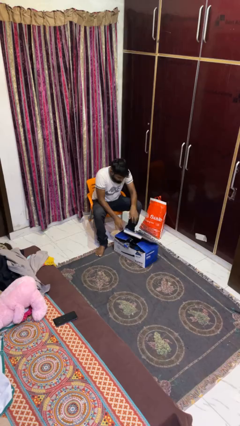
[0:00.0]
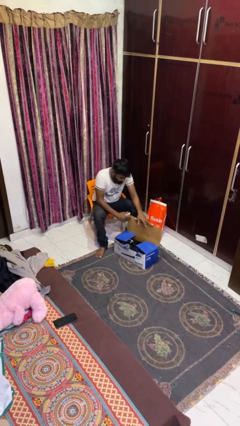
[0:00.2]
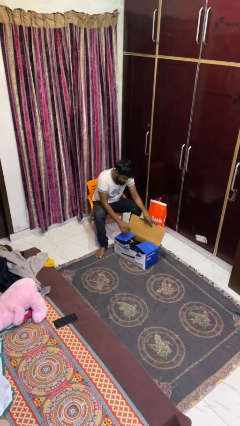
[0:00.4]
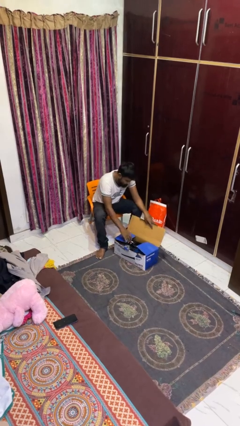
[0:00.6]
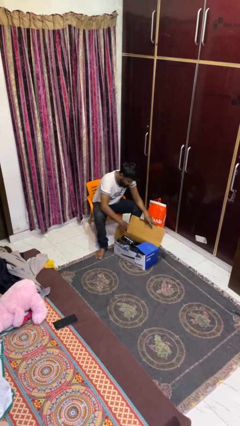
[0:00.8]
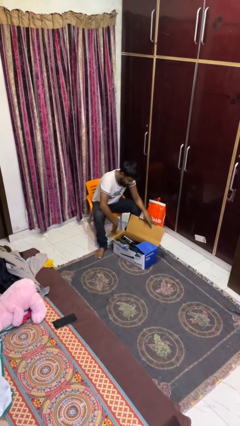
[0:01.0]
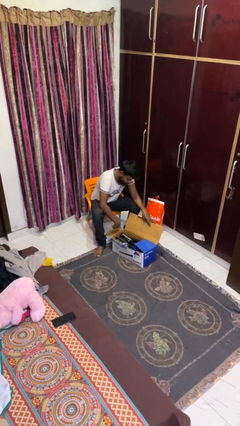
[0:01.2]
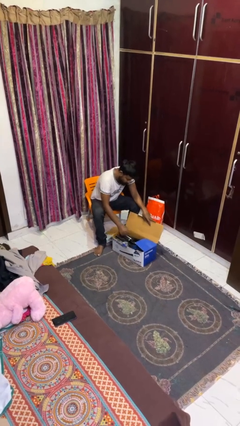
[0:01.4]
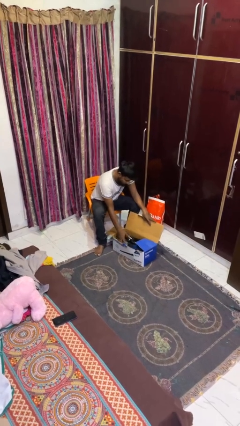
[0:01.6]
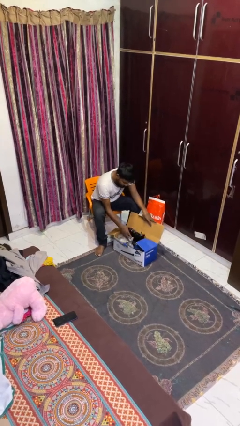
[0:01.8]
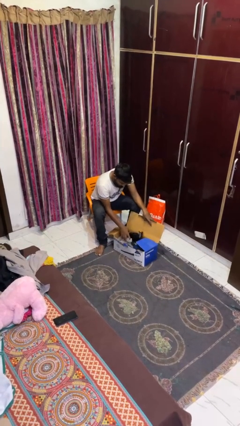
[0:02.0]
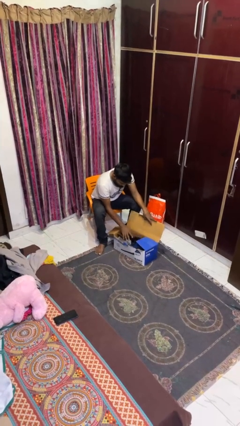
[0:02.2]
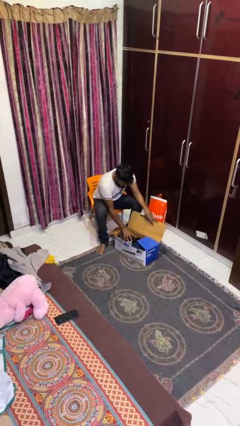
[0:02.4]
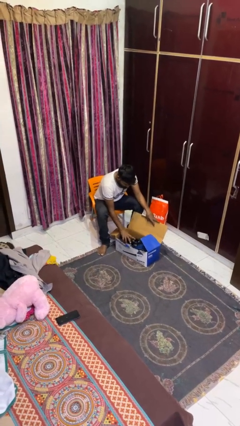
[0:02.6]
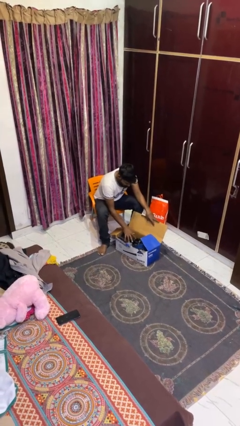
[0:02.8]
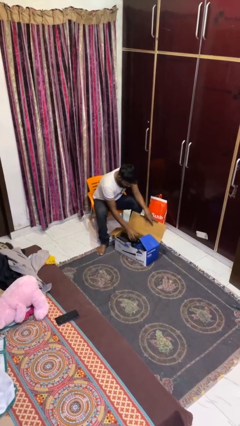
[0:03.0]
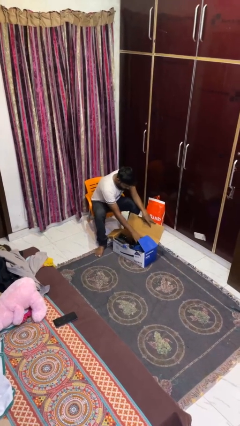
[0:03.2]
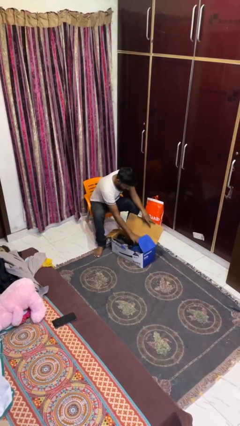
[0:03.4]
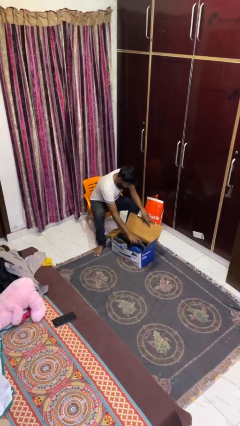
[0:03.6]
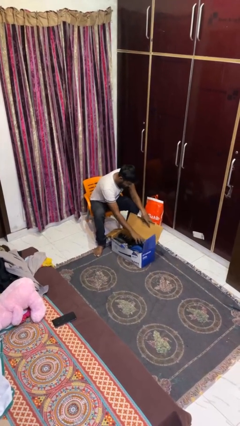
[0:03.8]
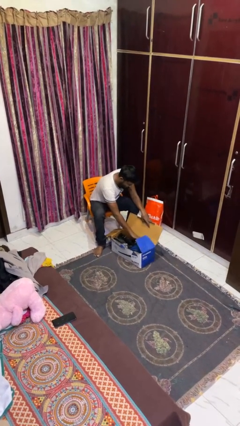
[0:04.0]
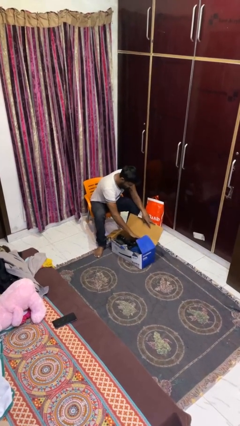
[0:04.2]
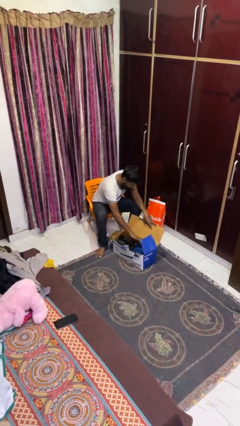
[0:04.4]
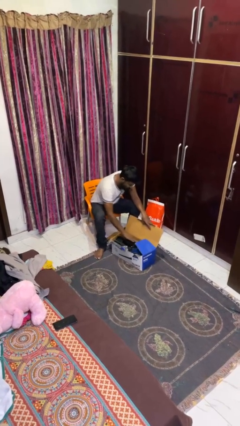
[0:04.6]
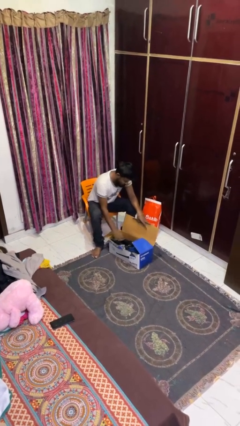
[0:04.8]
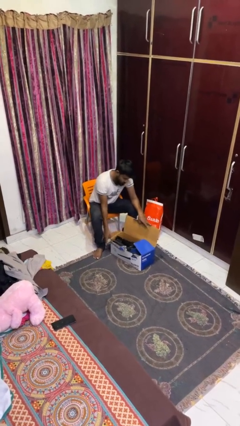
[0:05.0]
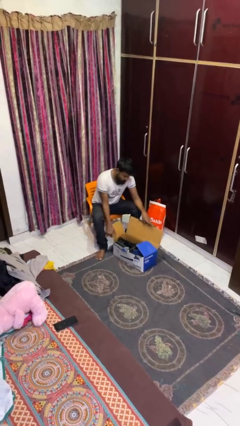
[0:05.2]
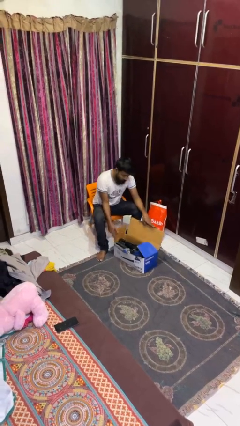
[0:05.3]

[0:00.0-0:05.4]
person searches in box

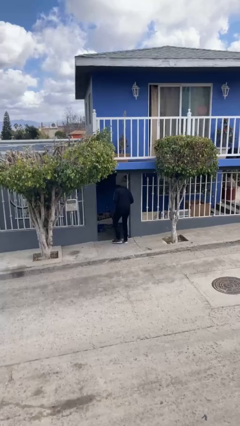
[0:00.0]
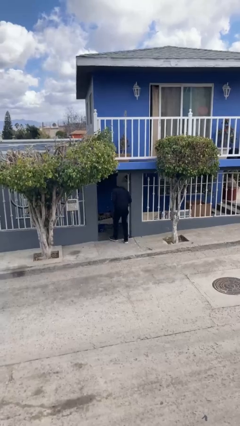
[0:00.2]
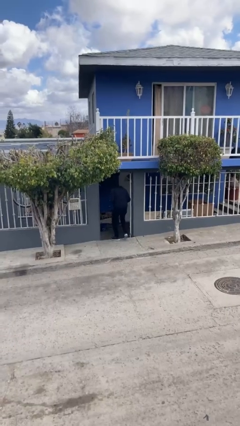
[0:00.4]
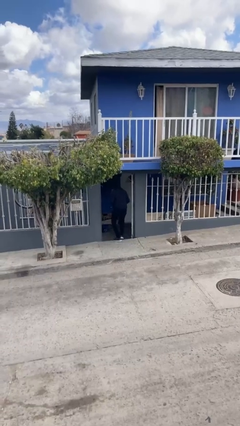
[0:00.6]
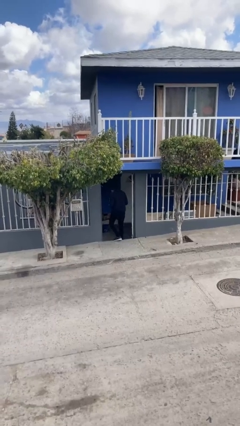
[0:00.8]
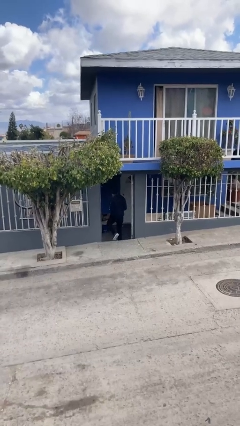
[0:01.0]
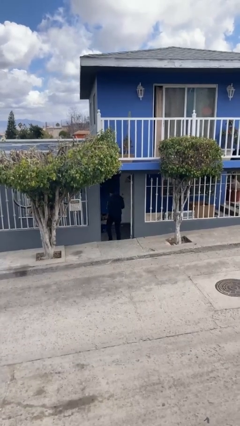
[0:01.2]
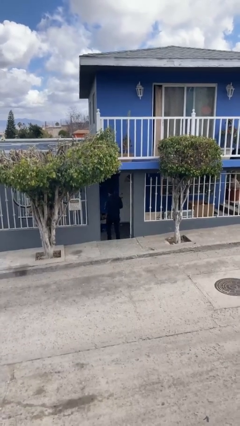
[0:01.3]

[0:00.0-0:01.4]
person exits scene through structure

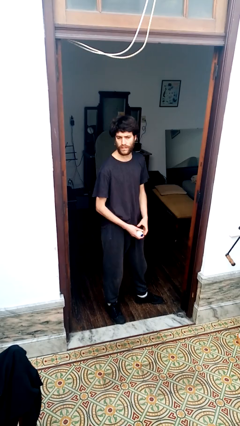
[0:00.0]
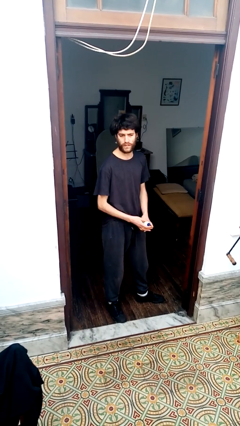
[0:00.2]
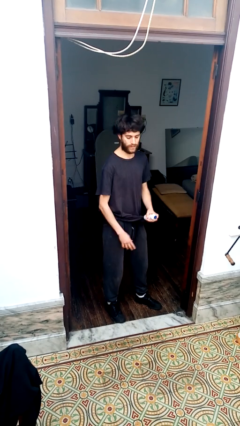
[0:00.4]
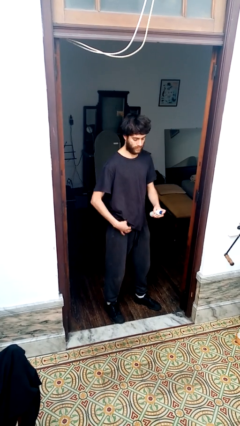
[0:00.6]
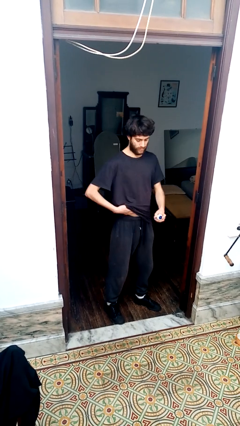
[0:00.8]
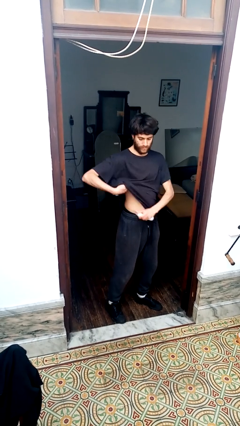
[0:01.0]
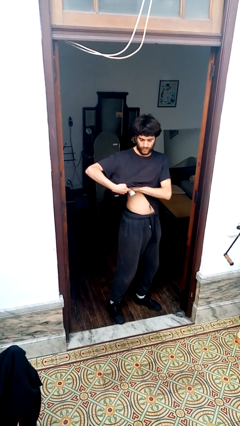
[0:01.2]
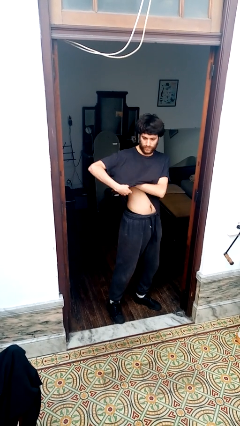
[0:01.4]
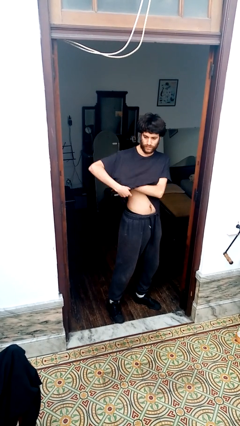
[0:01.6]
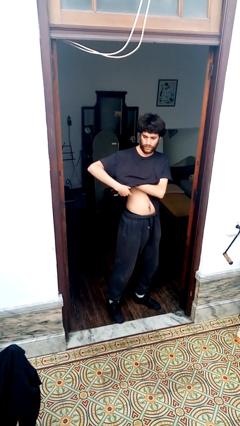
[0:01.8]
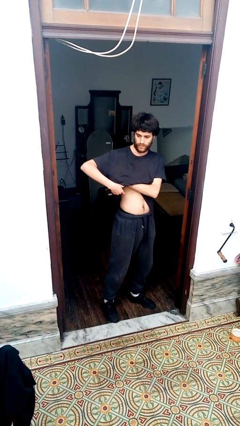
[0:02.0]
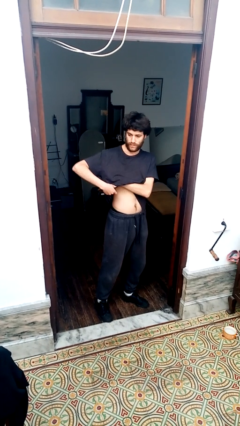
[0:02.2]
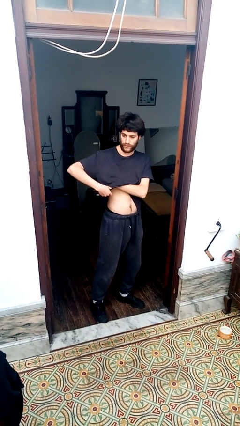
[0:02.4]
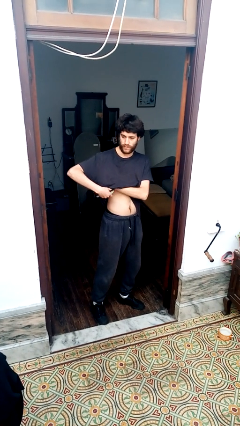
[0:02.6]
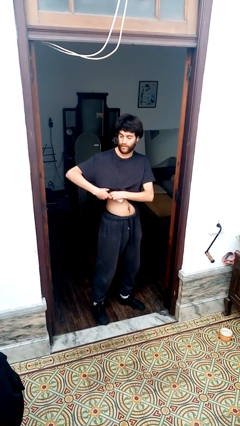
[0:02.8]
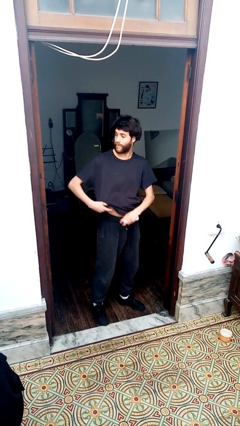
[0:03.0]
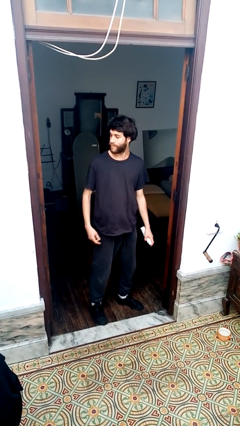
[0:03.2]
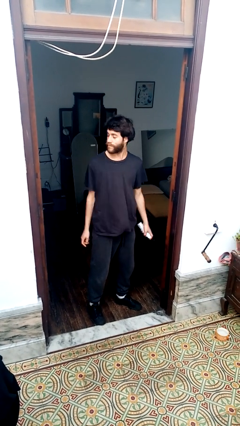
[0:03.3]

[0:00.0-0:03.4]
person applies deodorant

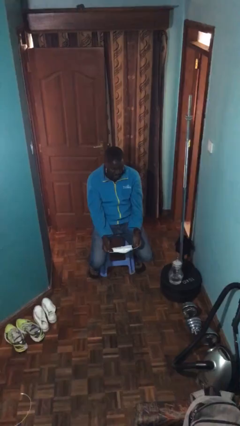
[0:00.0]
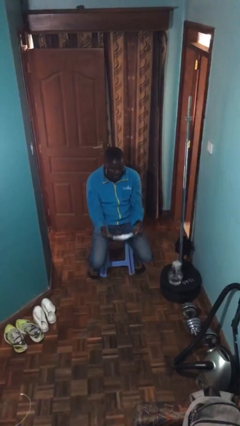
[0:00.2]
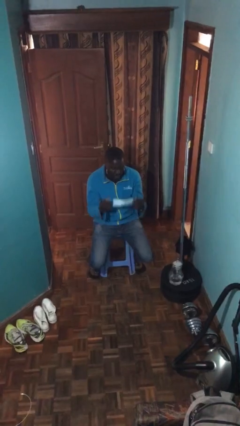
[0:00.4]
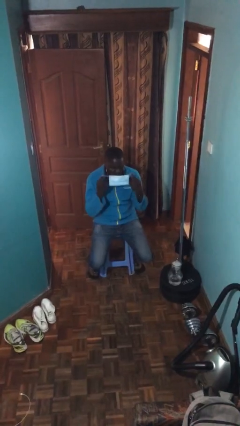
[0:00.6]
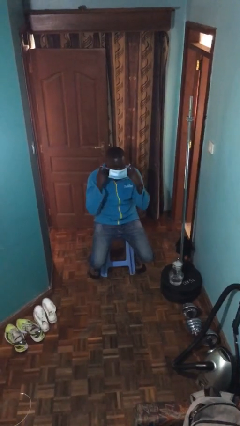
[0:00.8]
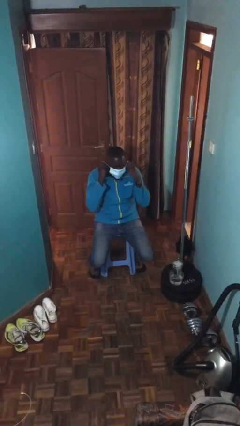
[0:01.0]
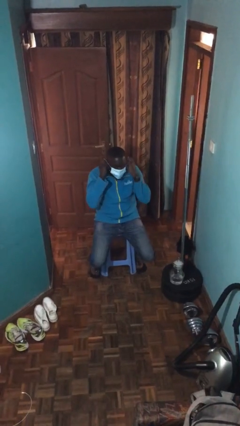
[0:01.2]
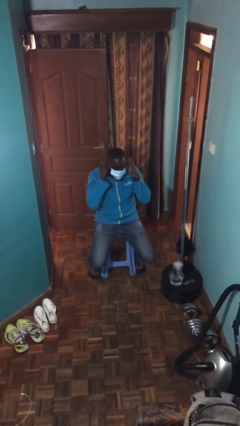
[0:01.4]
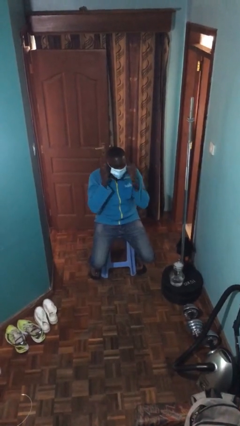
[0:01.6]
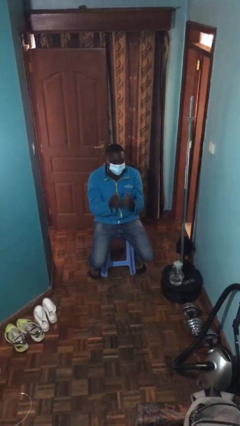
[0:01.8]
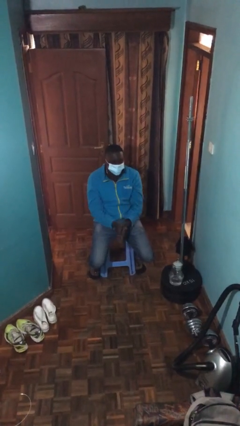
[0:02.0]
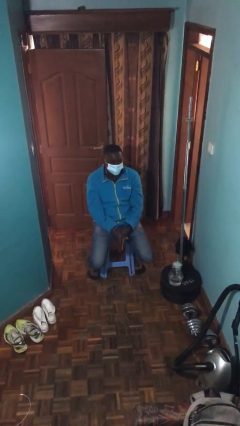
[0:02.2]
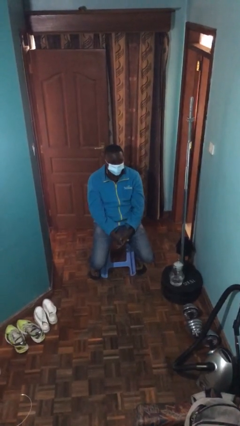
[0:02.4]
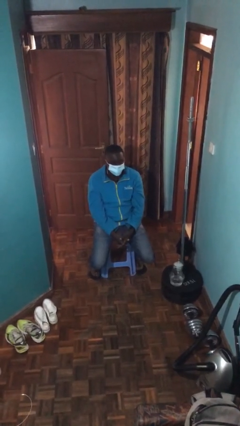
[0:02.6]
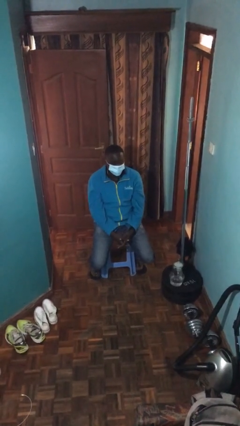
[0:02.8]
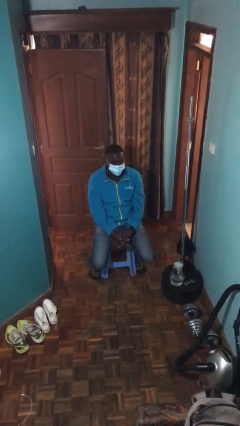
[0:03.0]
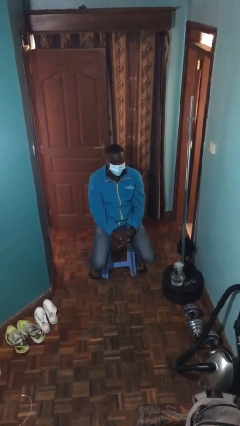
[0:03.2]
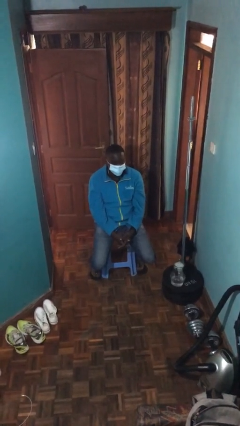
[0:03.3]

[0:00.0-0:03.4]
person puts on facemask

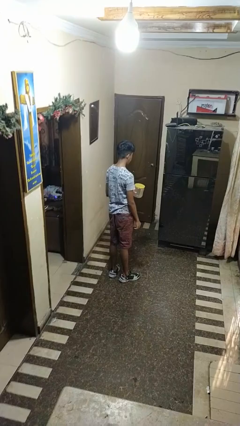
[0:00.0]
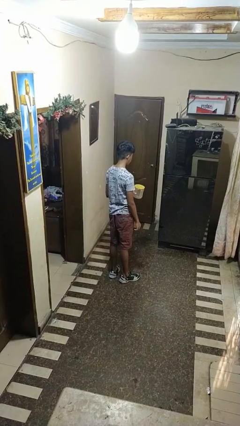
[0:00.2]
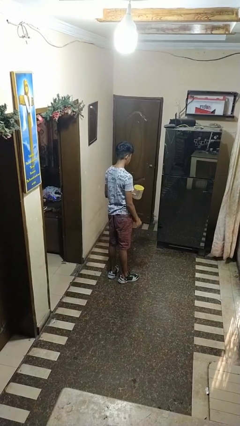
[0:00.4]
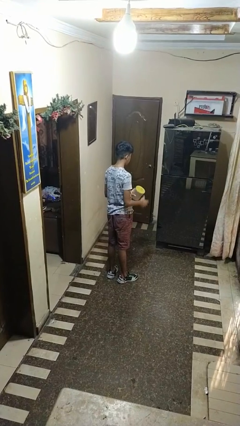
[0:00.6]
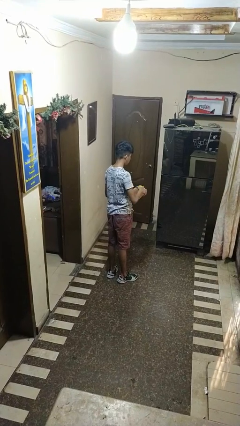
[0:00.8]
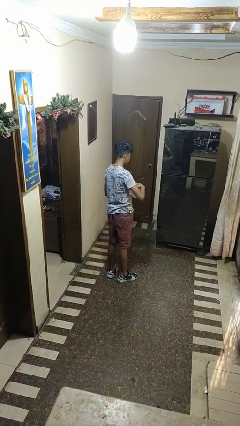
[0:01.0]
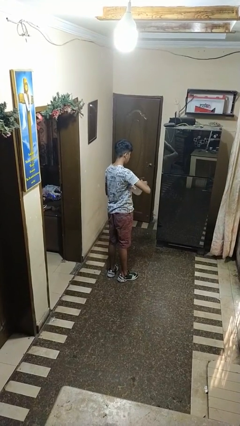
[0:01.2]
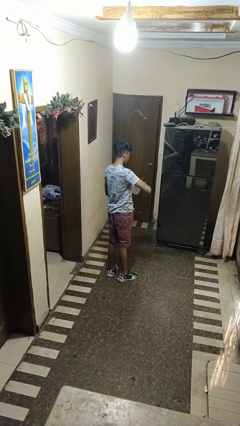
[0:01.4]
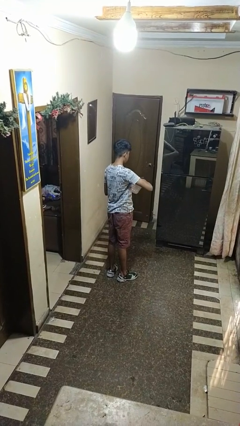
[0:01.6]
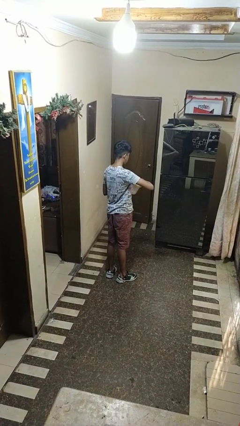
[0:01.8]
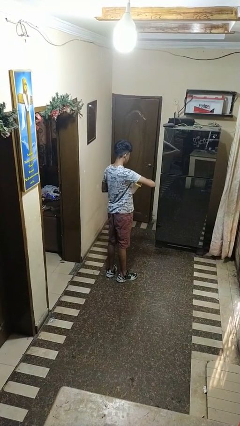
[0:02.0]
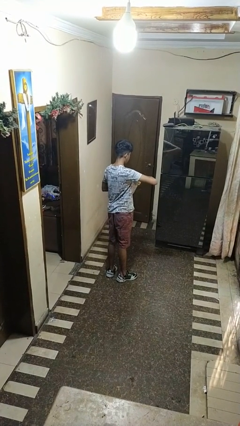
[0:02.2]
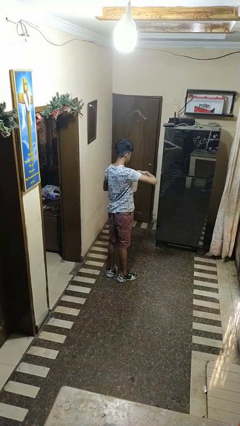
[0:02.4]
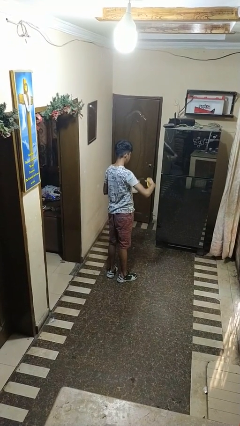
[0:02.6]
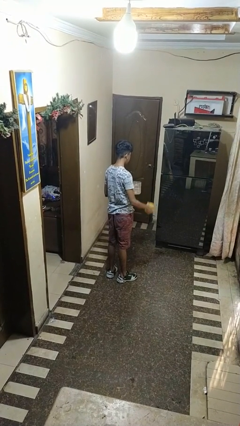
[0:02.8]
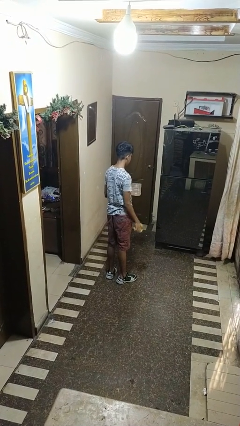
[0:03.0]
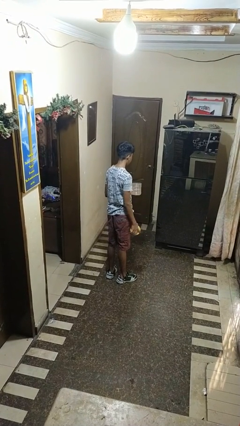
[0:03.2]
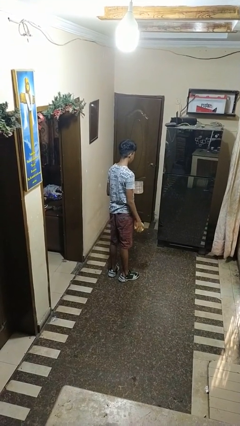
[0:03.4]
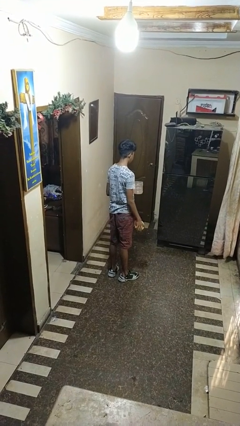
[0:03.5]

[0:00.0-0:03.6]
person opens jar

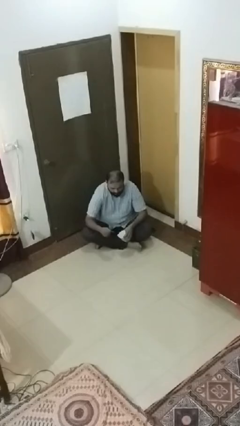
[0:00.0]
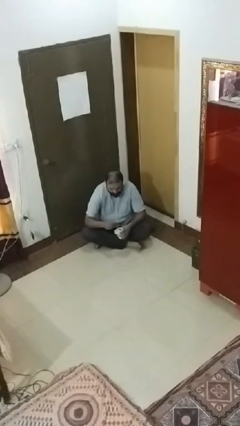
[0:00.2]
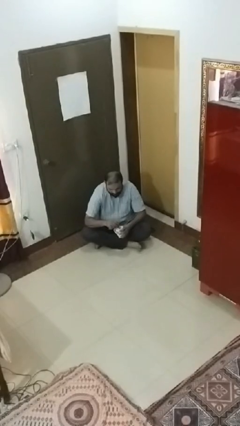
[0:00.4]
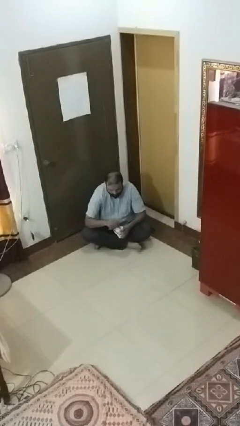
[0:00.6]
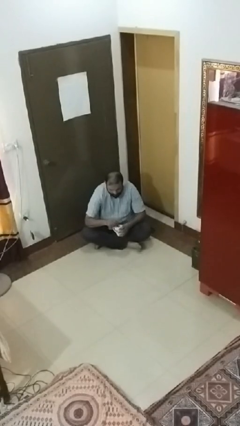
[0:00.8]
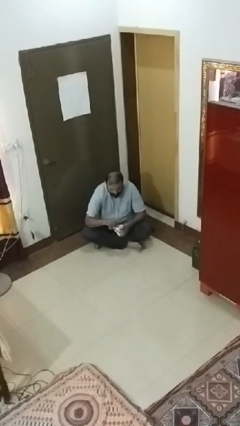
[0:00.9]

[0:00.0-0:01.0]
person stirs mug
